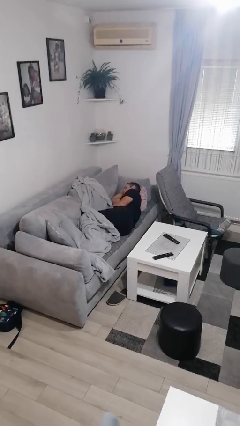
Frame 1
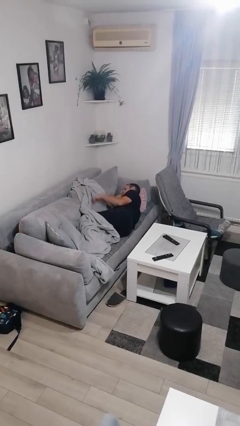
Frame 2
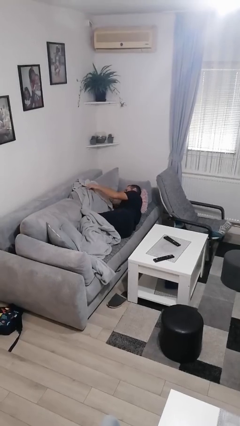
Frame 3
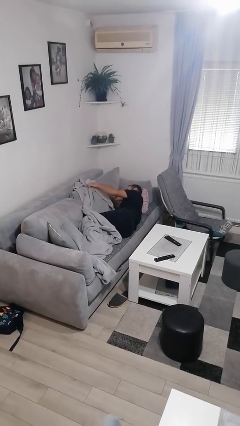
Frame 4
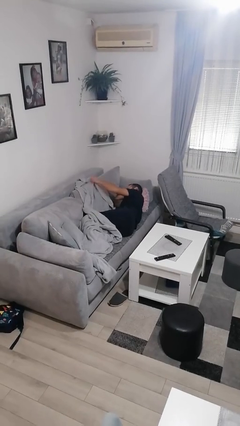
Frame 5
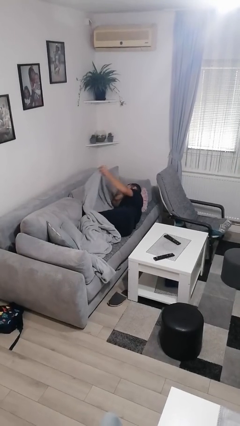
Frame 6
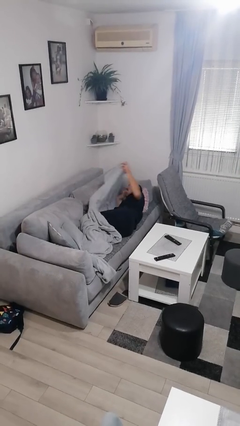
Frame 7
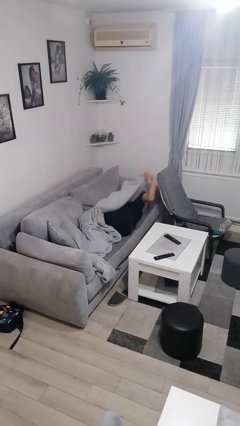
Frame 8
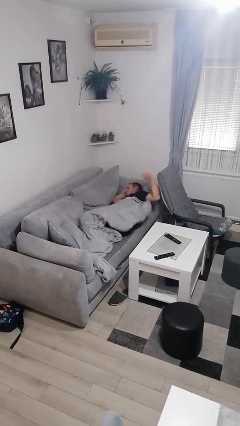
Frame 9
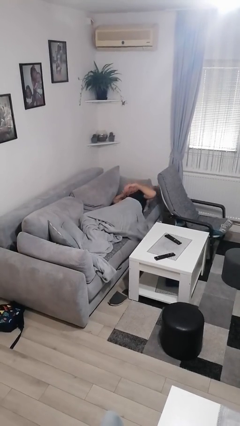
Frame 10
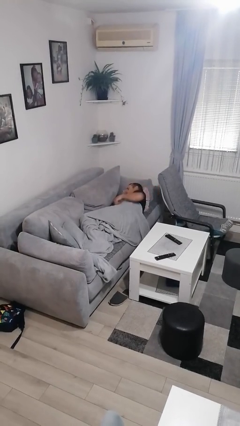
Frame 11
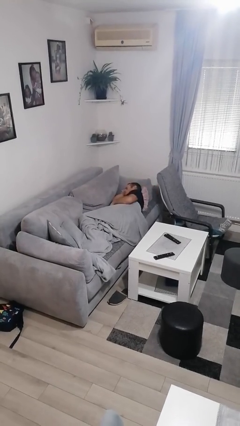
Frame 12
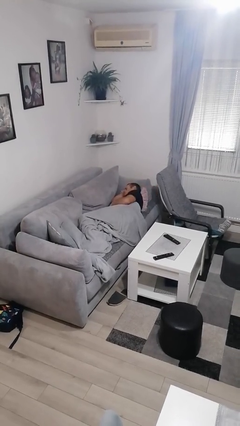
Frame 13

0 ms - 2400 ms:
person covers with blanket

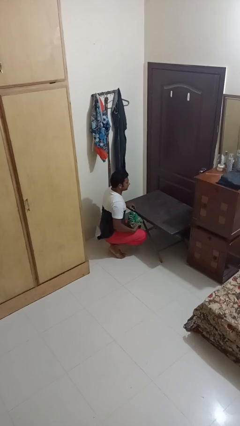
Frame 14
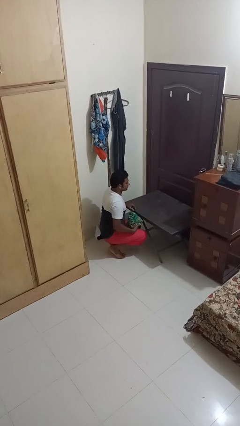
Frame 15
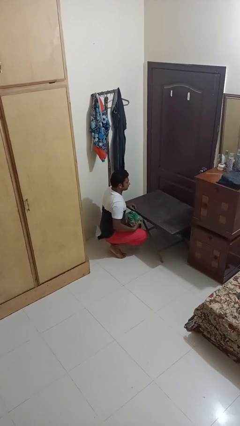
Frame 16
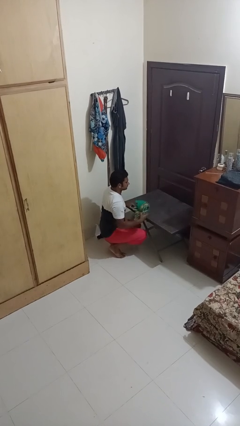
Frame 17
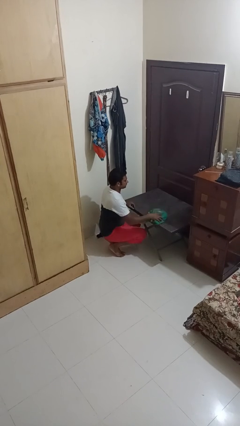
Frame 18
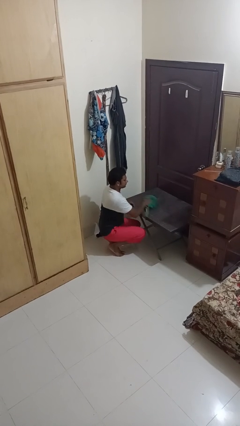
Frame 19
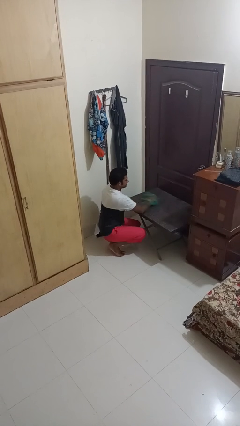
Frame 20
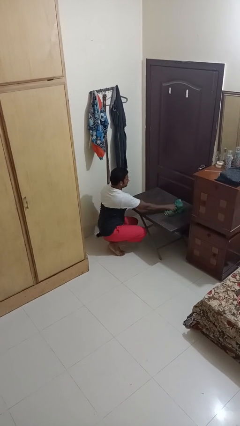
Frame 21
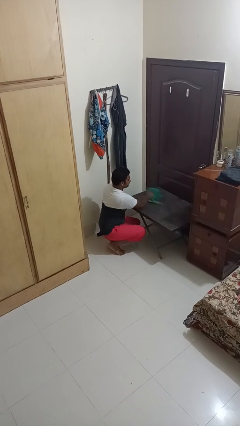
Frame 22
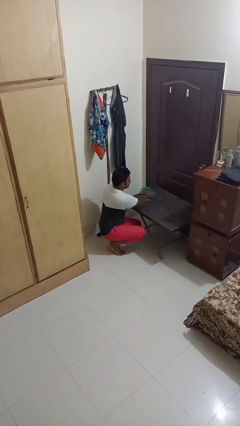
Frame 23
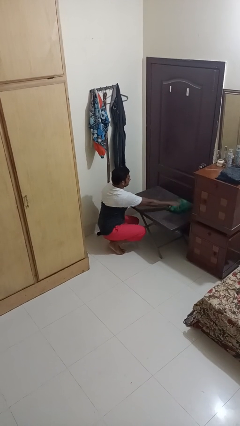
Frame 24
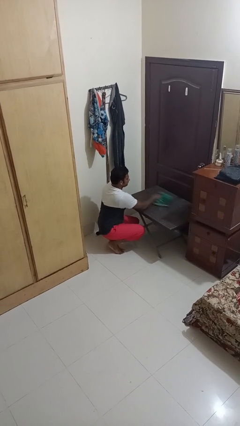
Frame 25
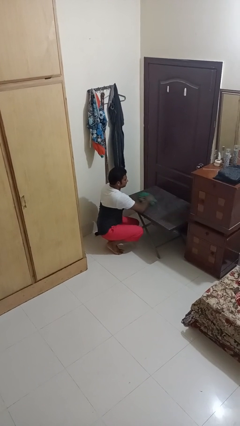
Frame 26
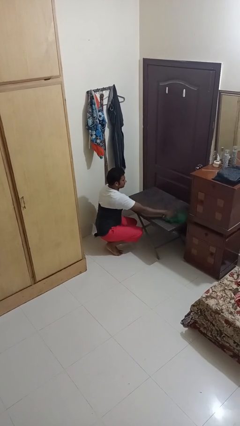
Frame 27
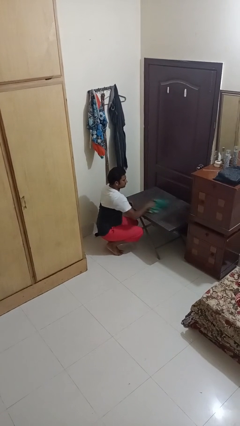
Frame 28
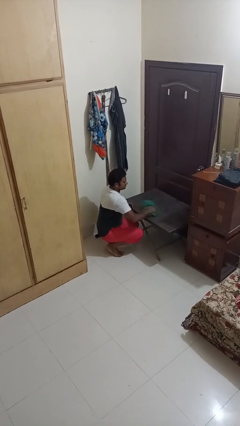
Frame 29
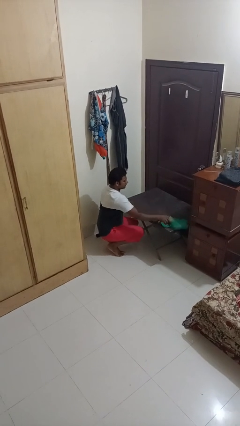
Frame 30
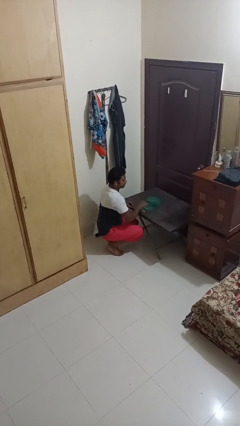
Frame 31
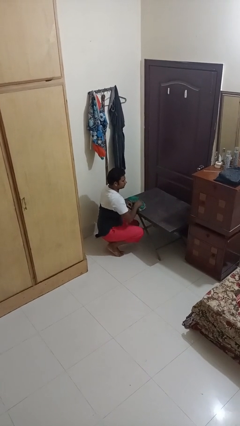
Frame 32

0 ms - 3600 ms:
person cleans table with rag

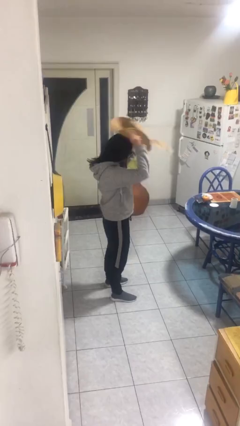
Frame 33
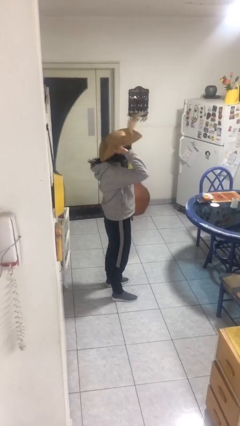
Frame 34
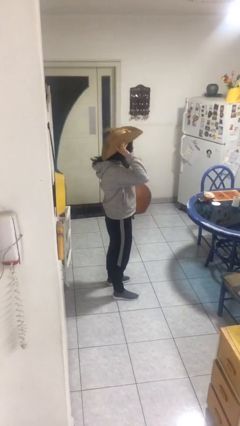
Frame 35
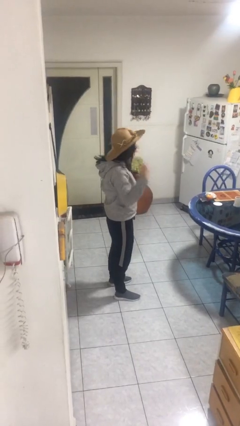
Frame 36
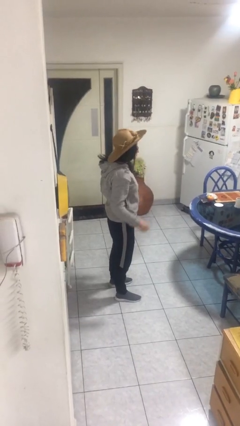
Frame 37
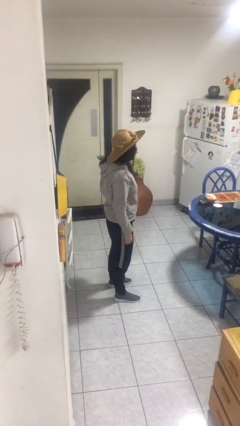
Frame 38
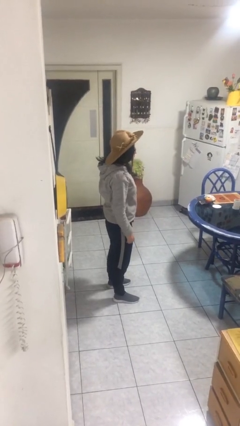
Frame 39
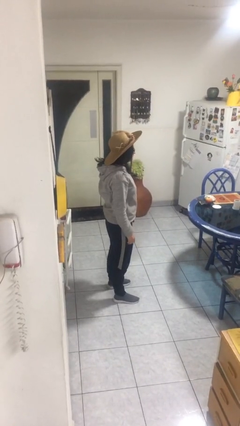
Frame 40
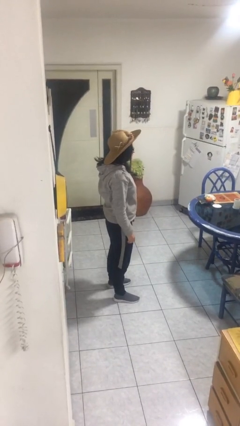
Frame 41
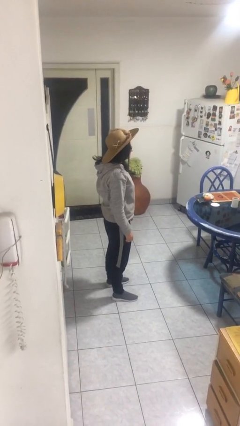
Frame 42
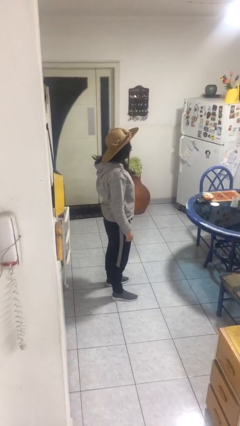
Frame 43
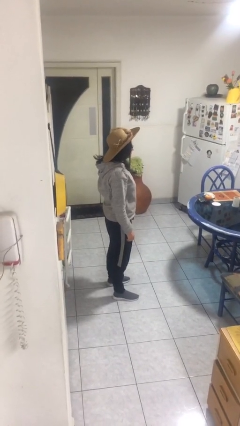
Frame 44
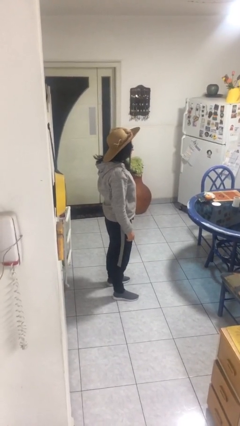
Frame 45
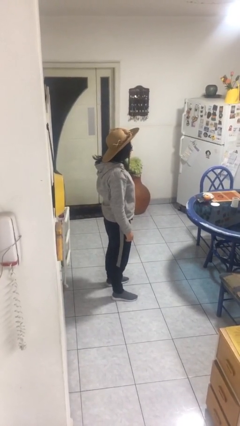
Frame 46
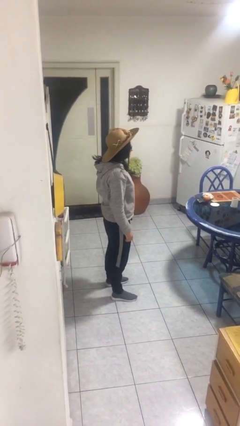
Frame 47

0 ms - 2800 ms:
person puts on hat

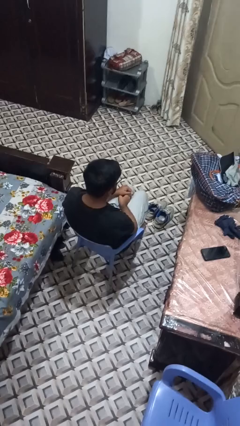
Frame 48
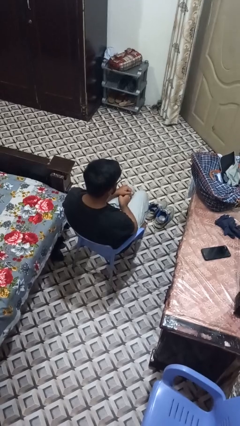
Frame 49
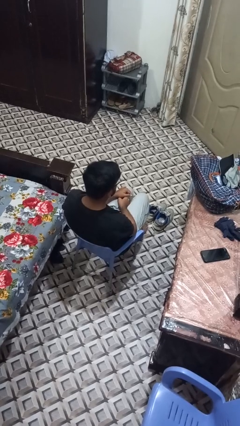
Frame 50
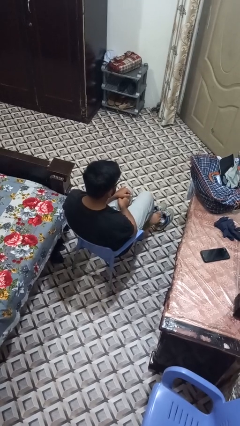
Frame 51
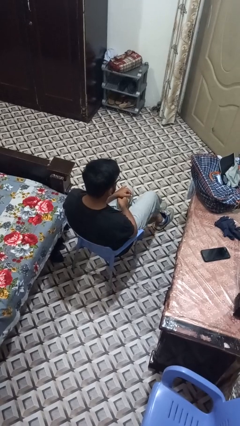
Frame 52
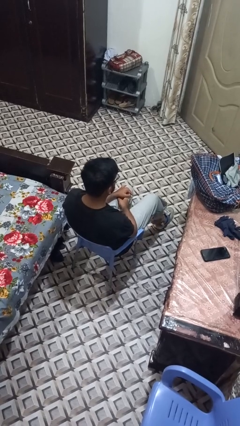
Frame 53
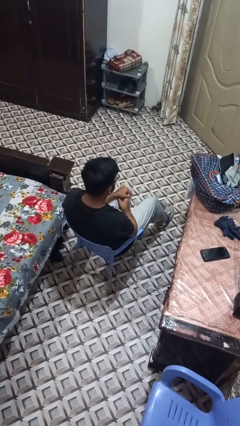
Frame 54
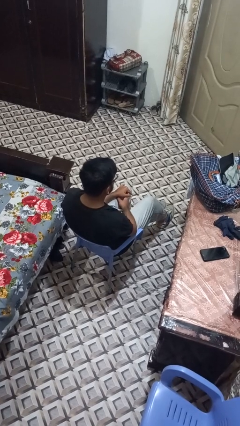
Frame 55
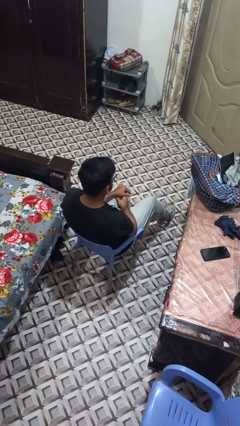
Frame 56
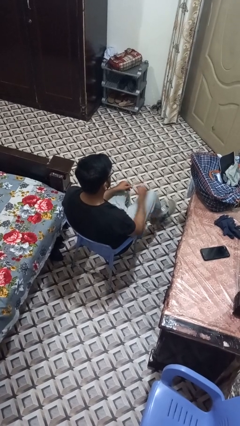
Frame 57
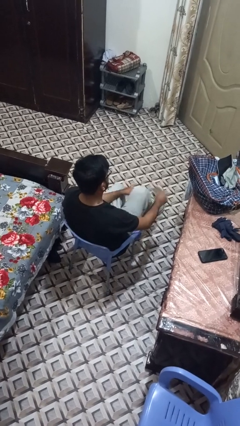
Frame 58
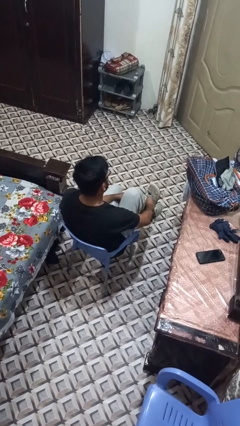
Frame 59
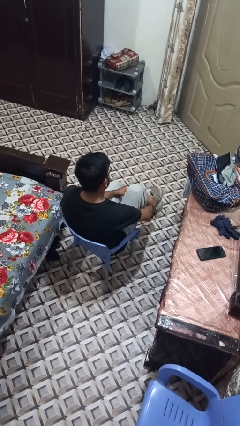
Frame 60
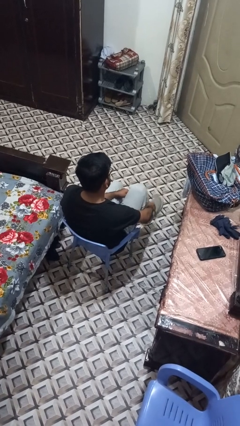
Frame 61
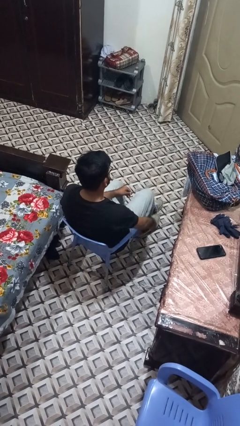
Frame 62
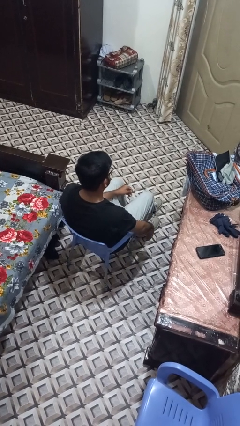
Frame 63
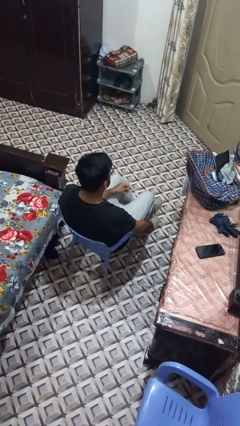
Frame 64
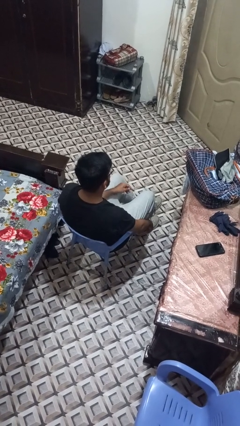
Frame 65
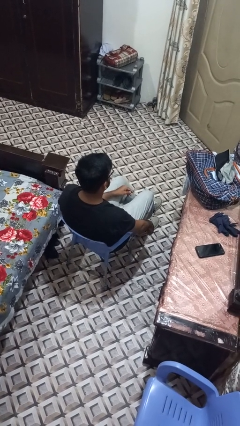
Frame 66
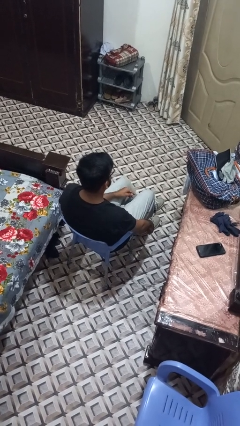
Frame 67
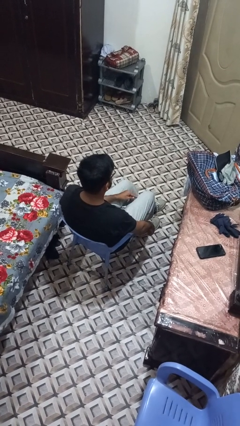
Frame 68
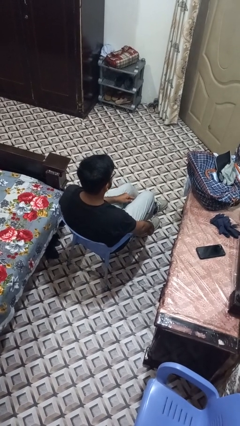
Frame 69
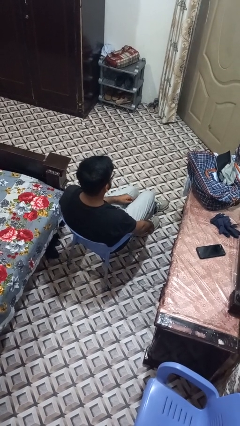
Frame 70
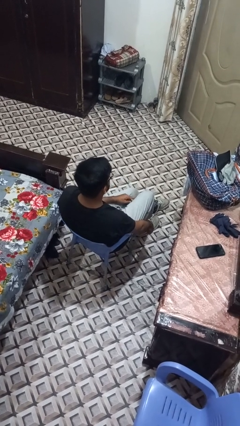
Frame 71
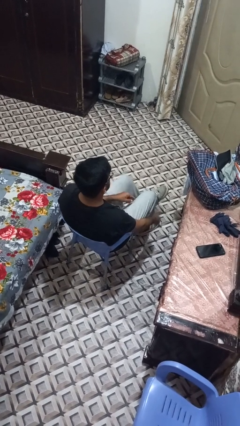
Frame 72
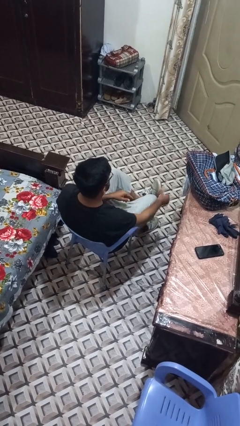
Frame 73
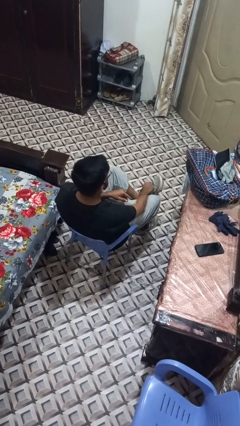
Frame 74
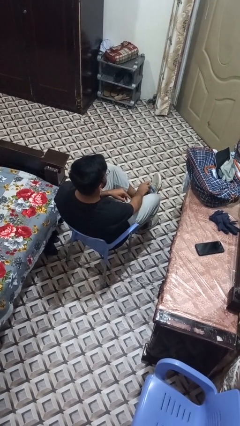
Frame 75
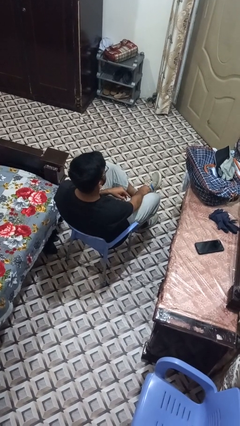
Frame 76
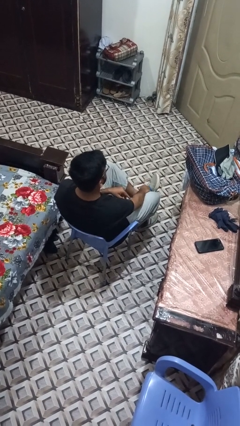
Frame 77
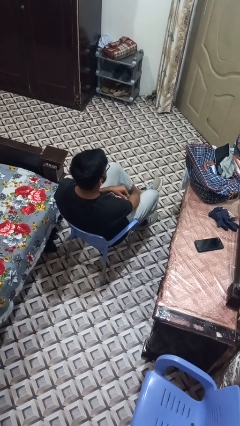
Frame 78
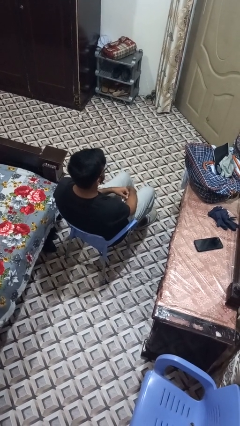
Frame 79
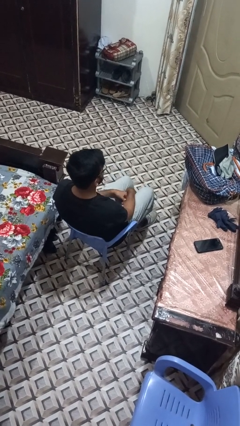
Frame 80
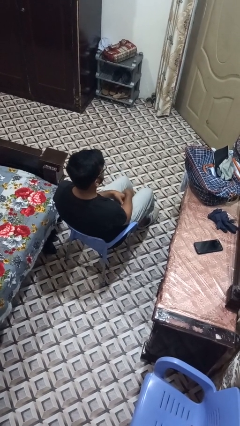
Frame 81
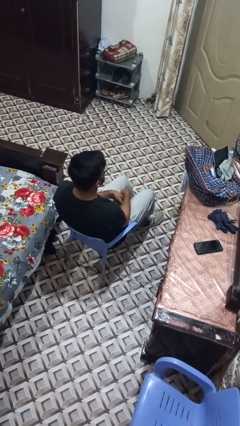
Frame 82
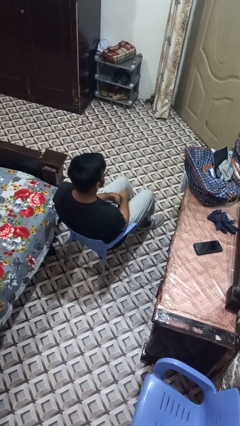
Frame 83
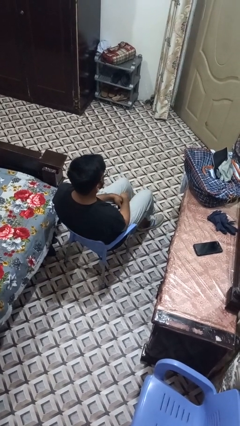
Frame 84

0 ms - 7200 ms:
person puts on shoes

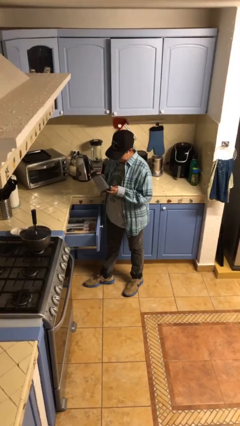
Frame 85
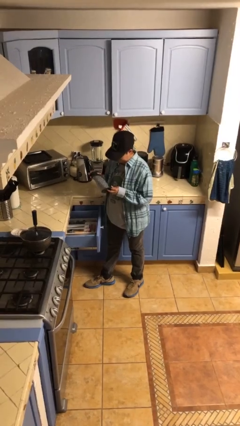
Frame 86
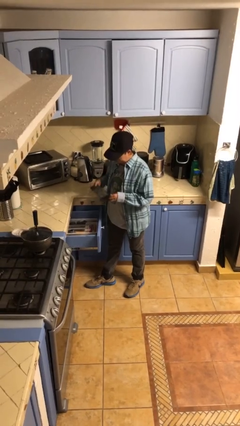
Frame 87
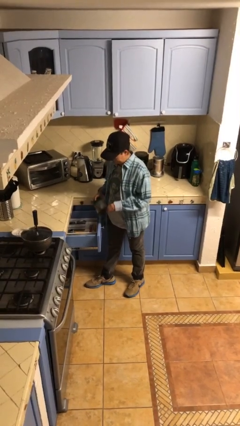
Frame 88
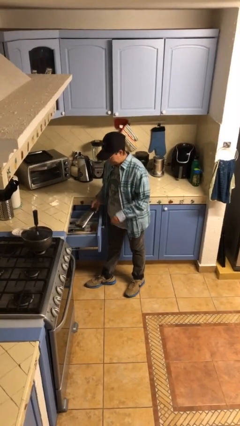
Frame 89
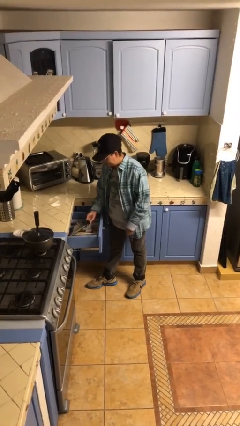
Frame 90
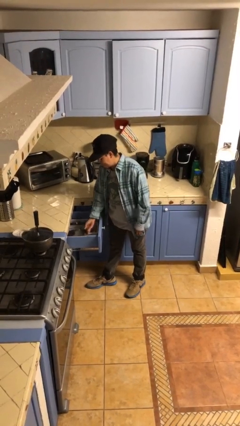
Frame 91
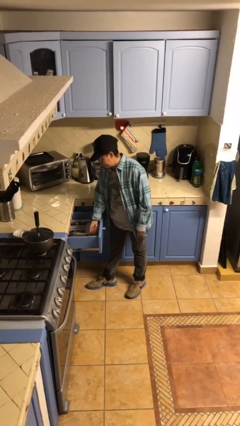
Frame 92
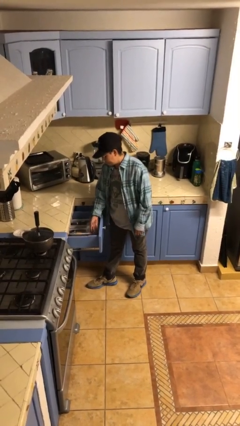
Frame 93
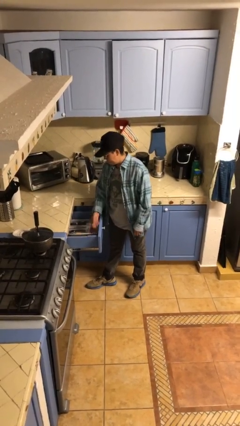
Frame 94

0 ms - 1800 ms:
person puts object into kitchen drawer
